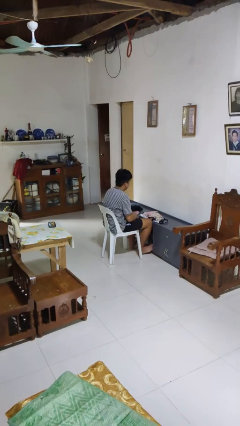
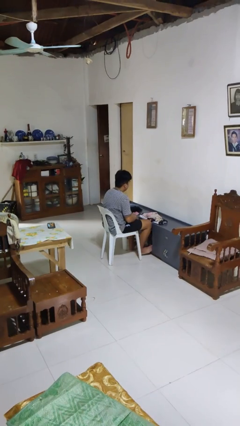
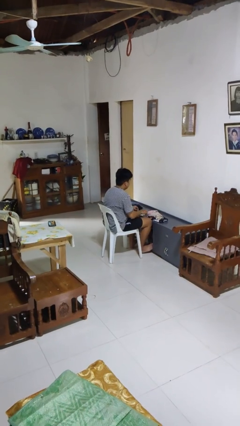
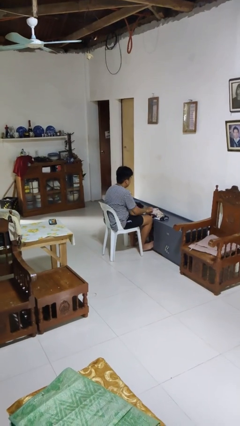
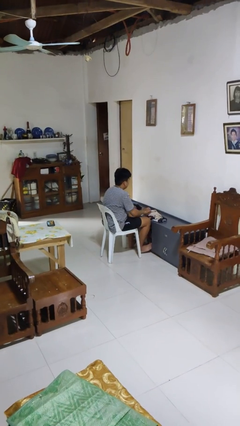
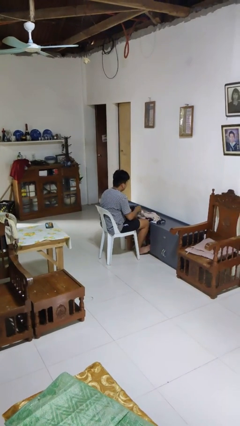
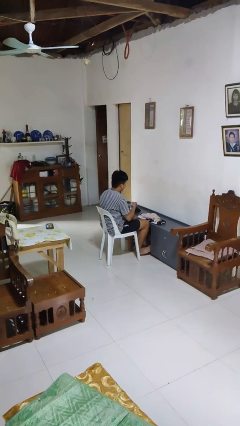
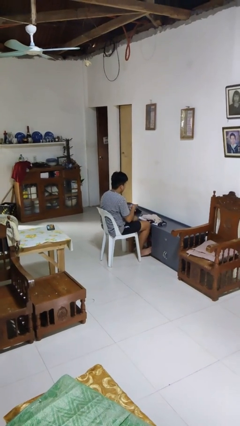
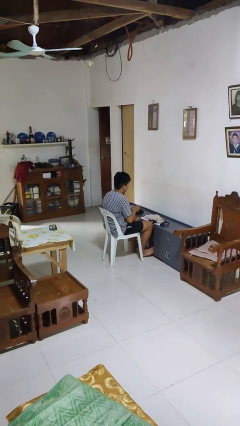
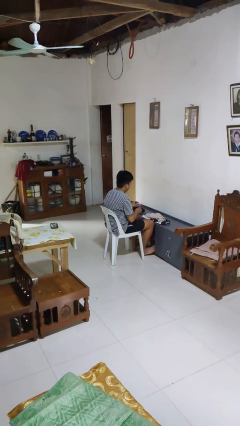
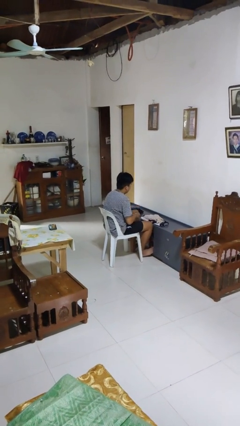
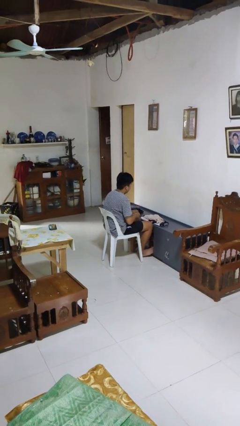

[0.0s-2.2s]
person folds socks

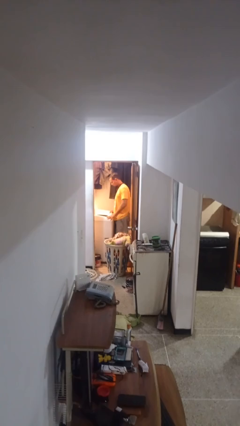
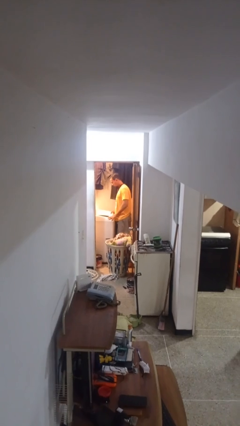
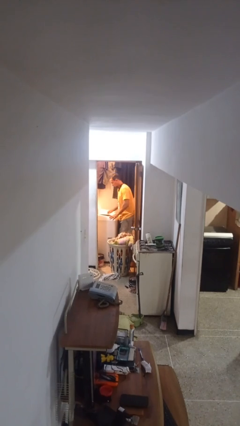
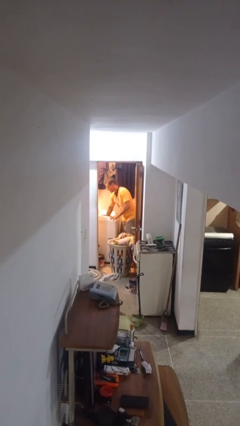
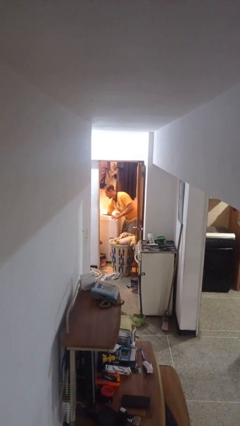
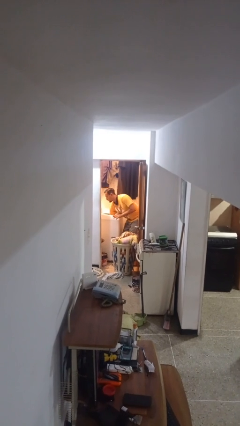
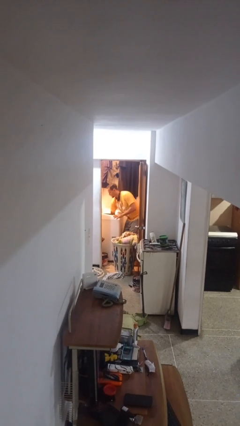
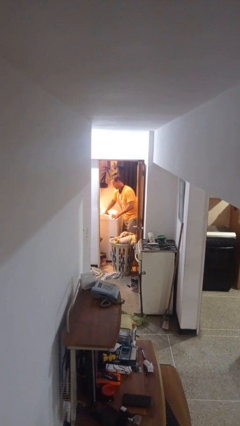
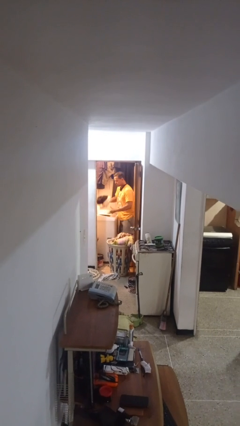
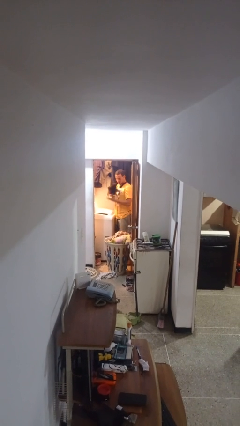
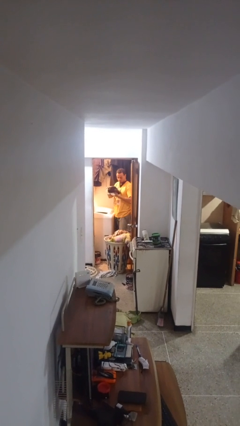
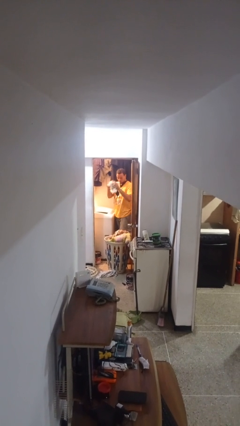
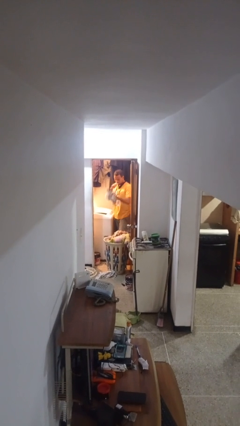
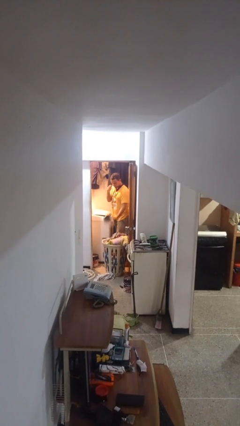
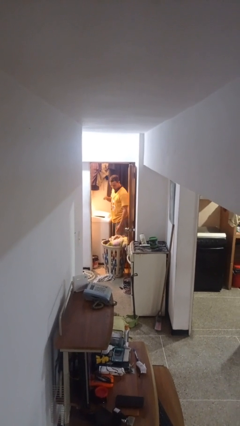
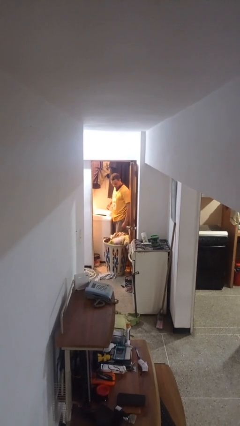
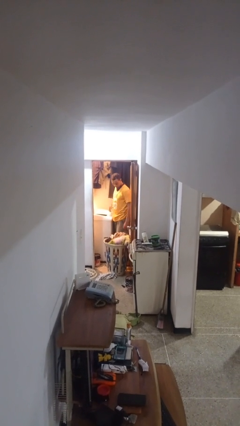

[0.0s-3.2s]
person loads clotheswasher

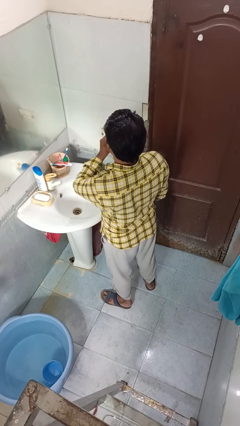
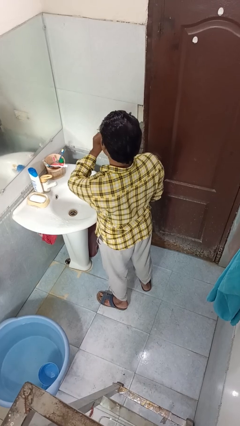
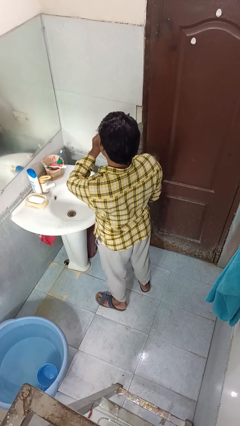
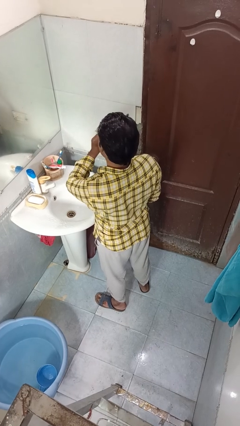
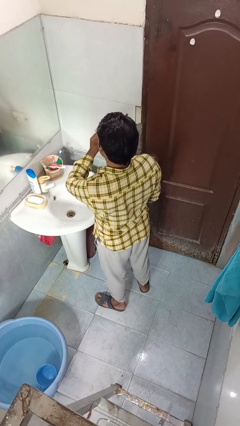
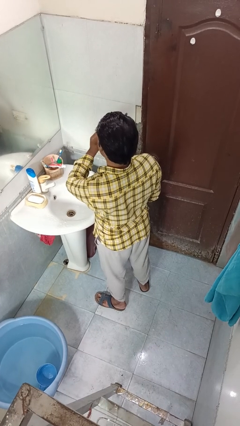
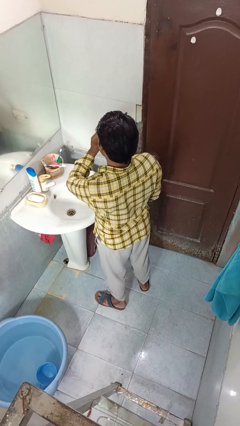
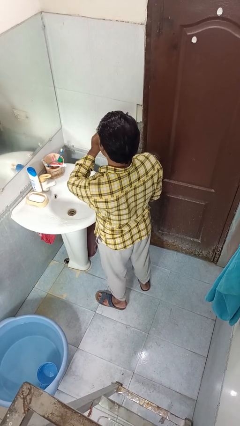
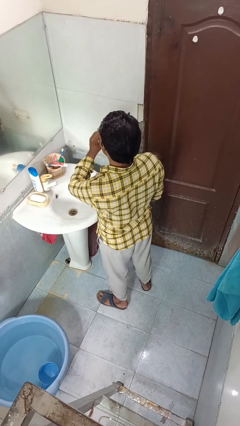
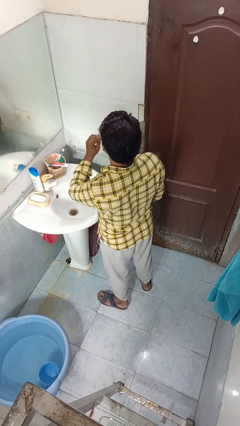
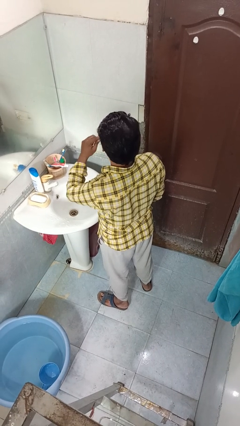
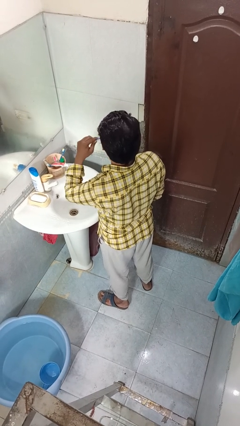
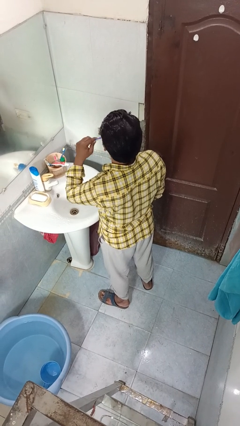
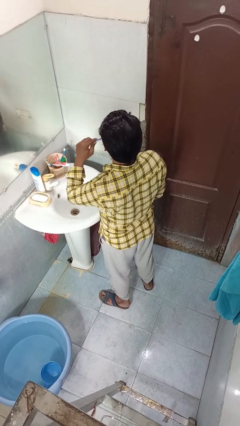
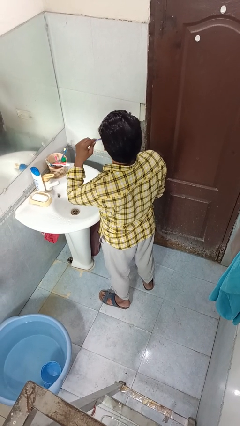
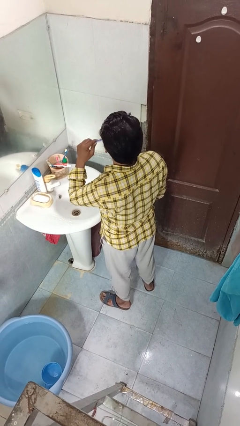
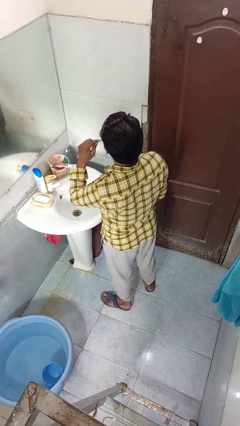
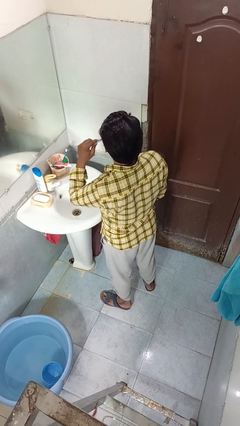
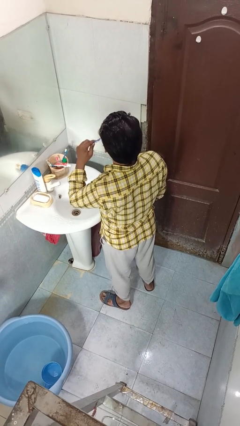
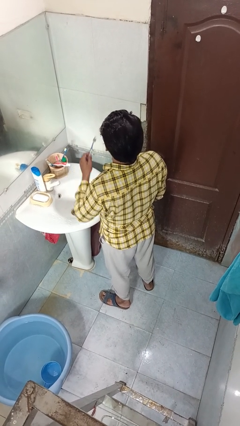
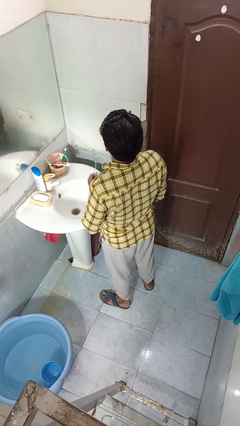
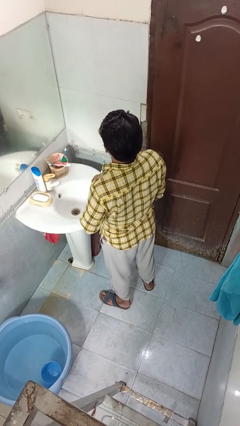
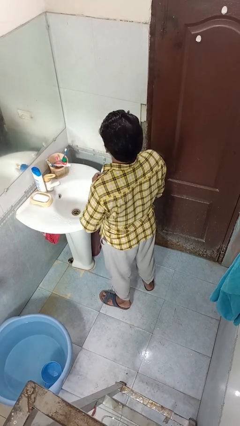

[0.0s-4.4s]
person brushes teeth

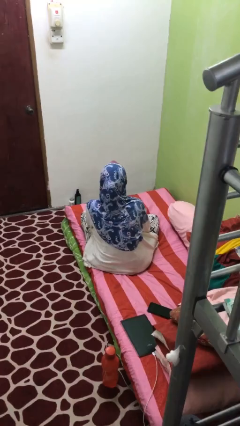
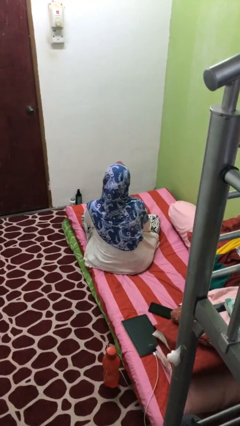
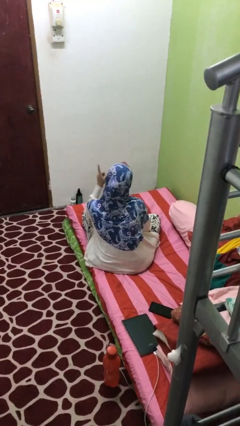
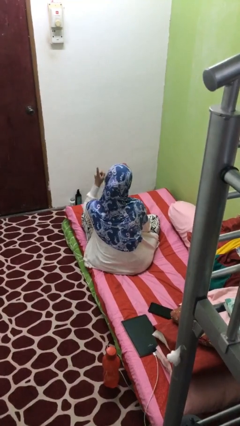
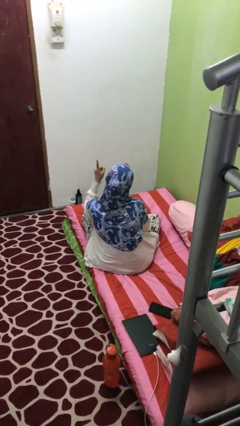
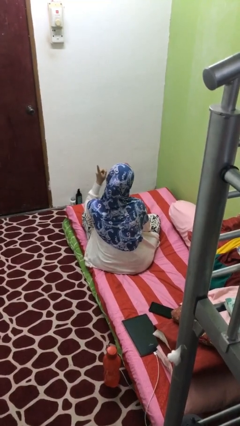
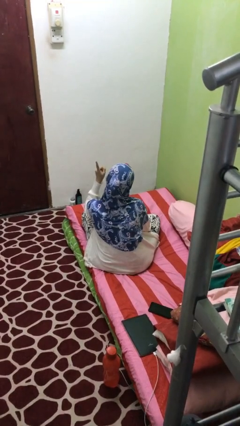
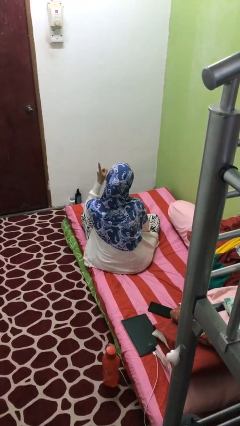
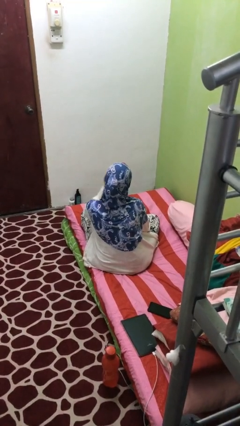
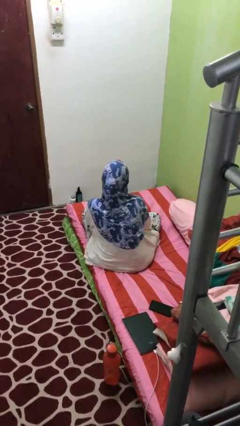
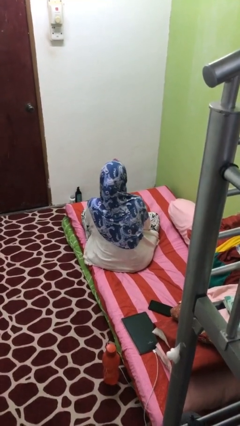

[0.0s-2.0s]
person gestures number one

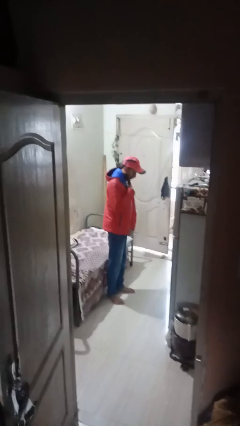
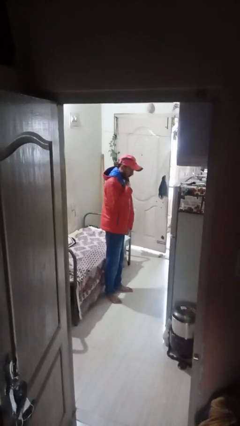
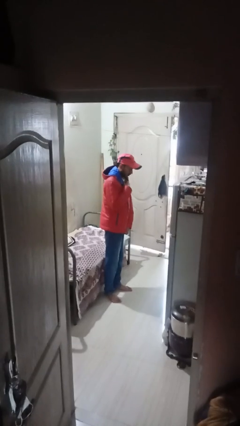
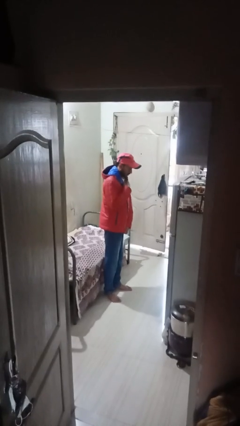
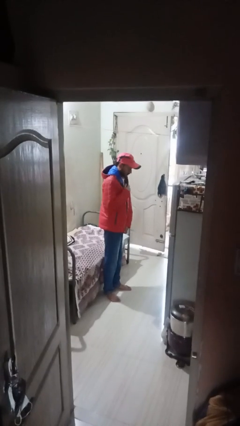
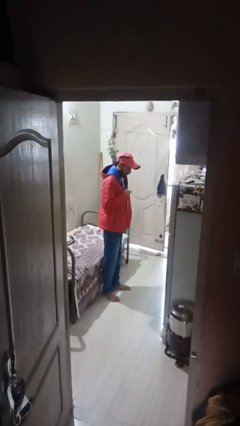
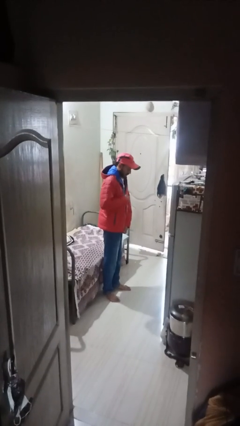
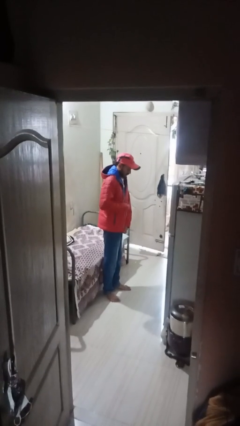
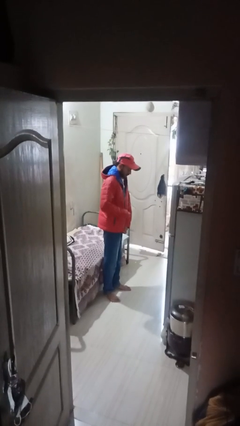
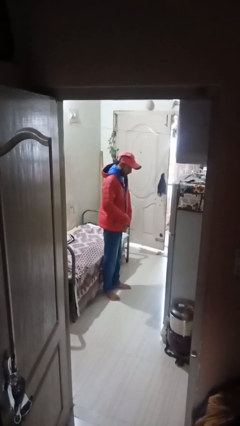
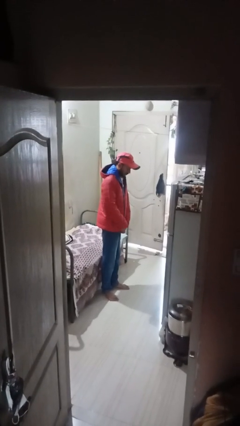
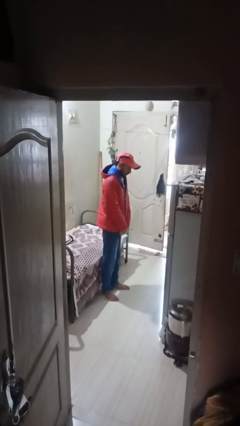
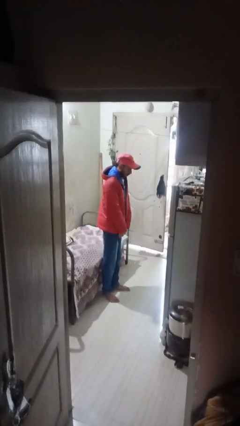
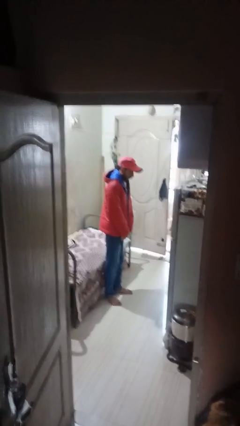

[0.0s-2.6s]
person unzips jacket

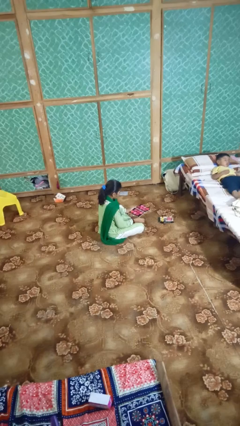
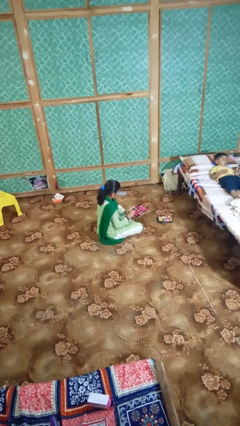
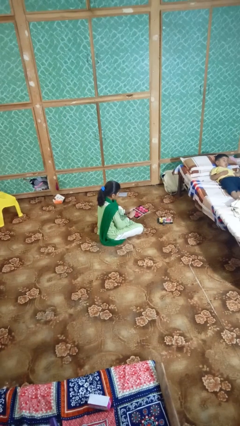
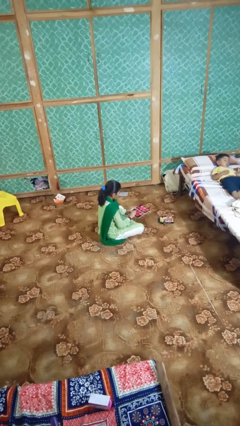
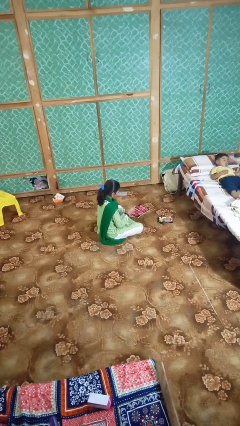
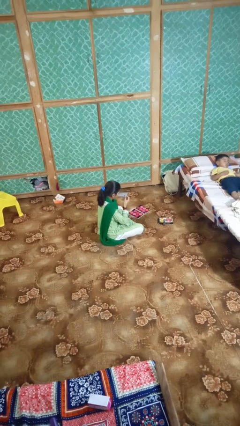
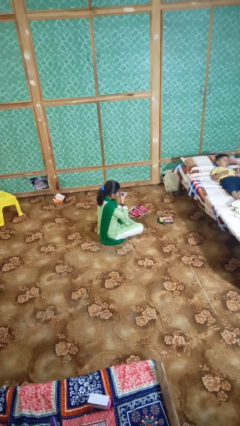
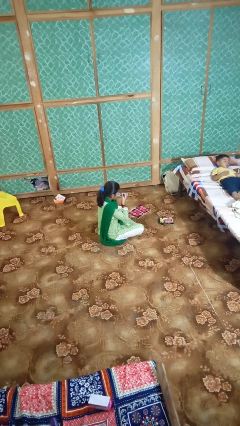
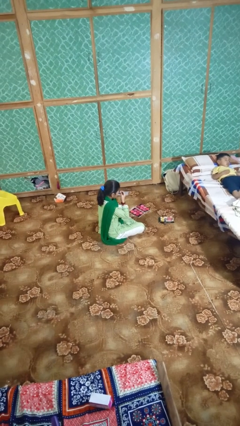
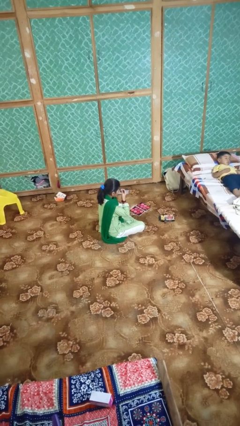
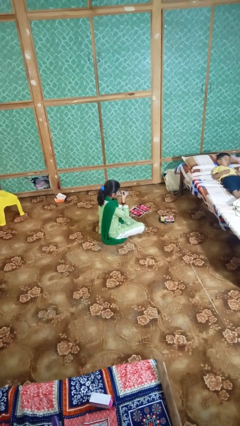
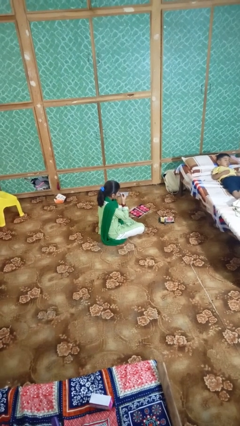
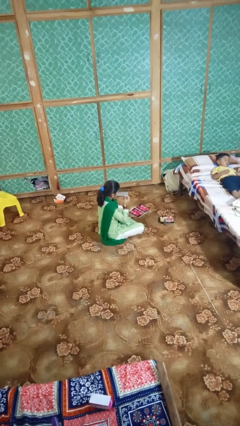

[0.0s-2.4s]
person applies eye makeup

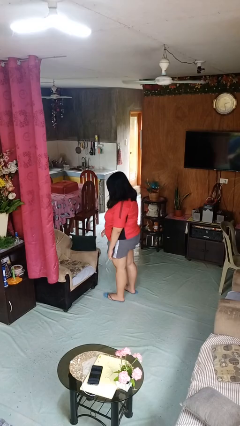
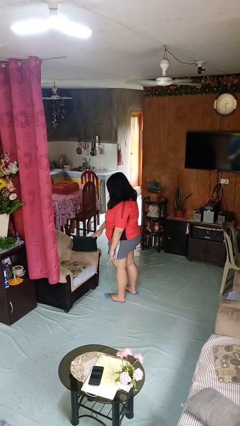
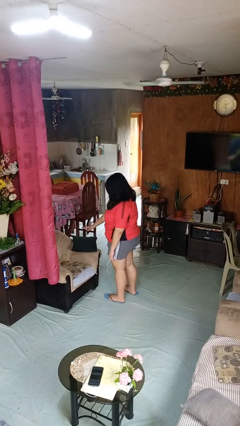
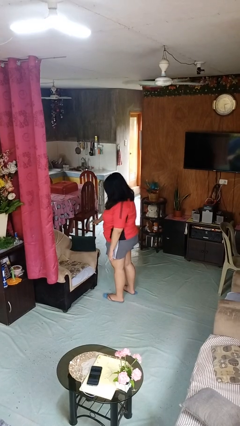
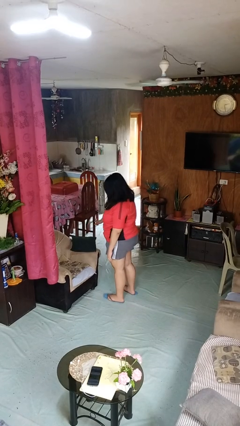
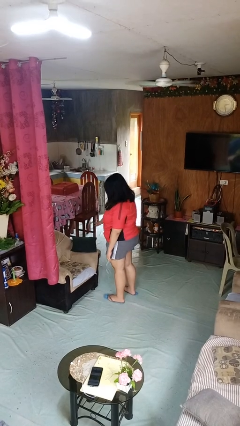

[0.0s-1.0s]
person waves hand over object
